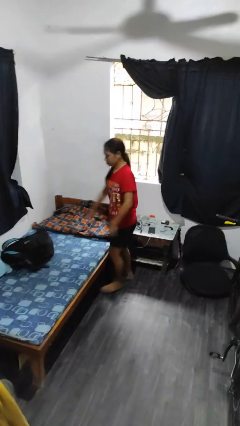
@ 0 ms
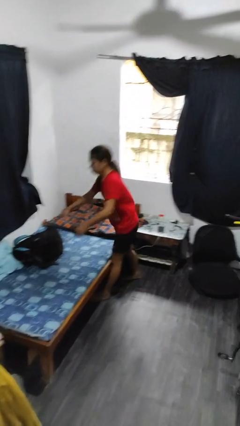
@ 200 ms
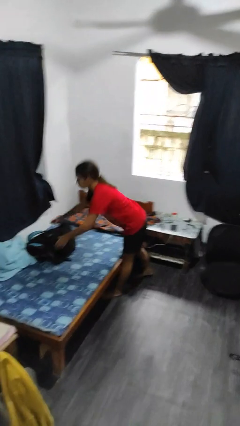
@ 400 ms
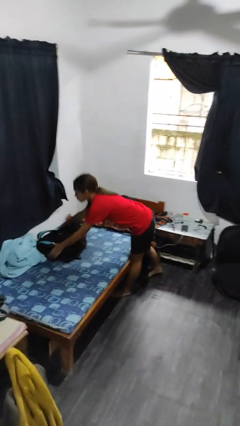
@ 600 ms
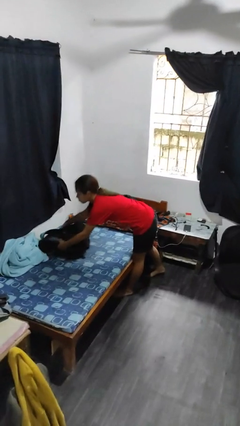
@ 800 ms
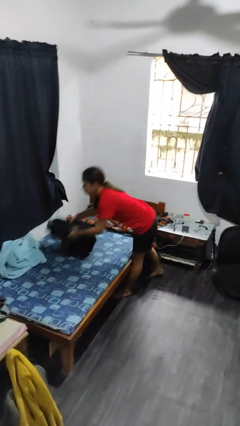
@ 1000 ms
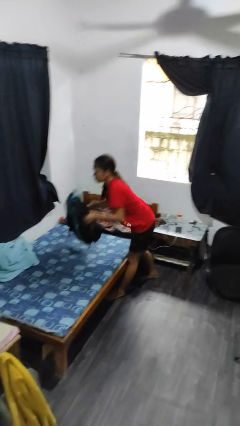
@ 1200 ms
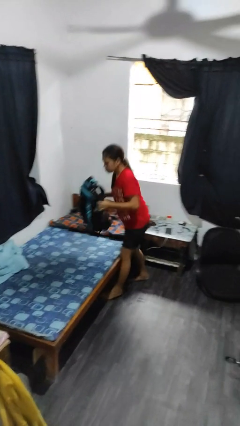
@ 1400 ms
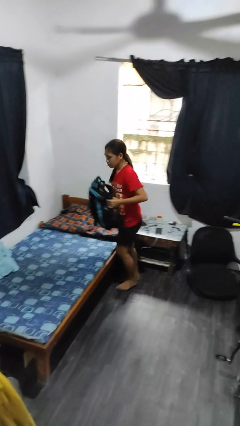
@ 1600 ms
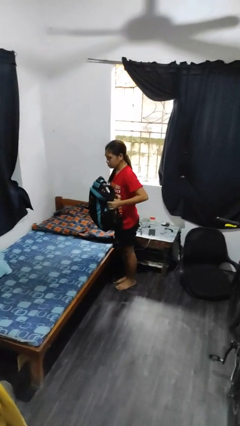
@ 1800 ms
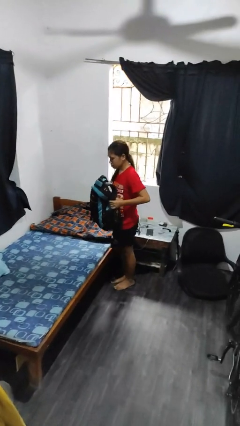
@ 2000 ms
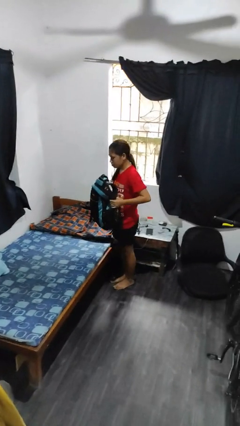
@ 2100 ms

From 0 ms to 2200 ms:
person picks up object from bed

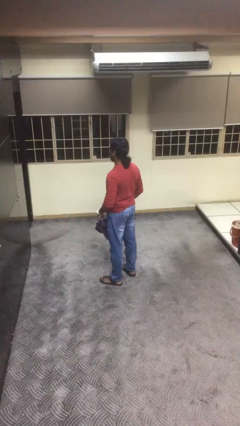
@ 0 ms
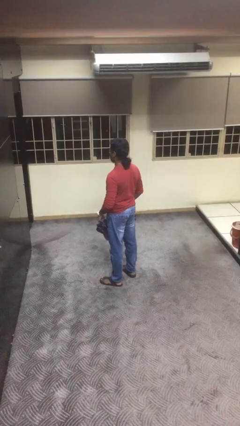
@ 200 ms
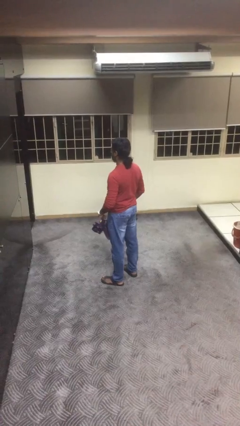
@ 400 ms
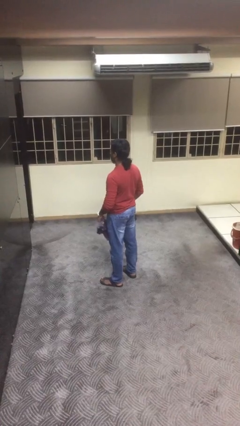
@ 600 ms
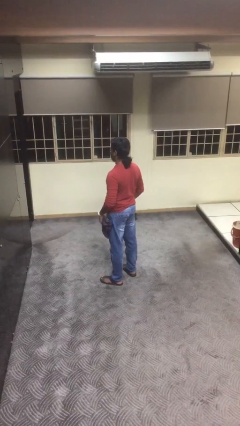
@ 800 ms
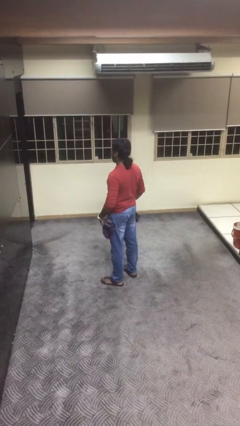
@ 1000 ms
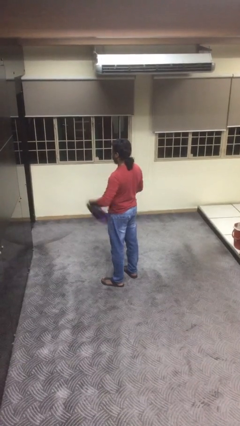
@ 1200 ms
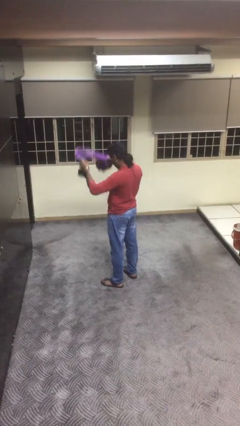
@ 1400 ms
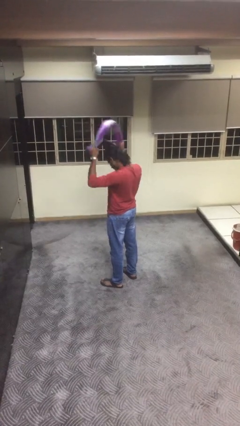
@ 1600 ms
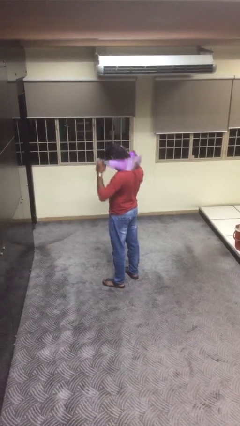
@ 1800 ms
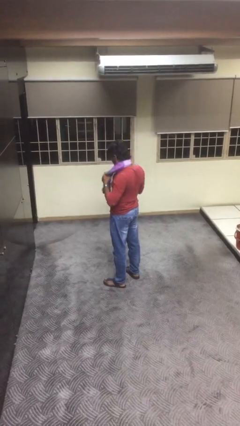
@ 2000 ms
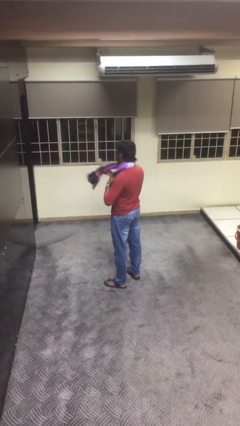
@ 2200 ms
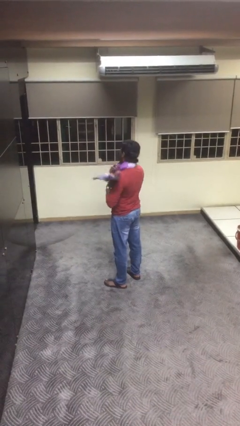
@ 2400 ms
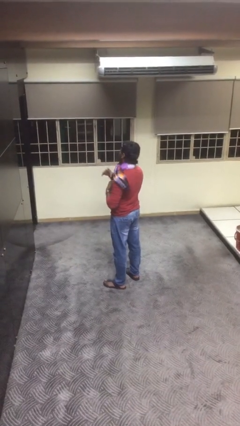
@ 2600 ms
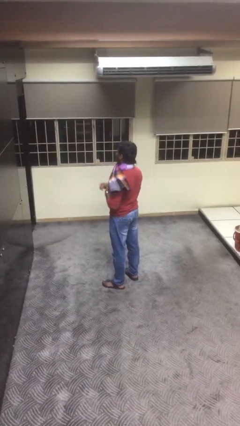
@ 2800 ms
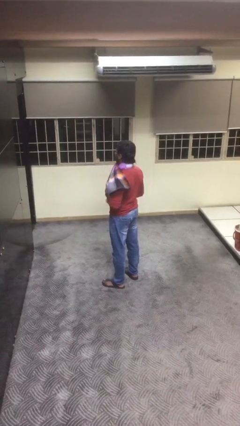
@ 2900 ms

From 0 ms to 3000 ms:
person puts on scarf

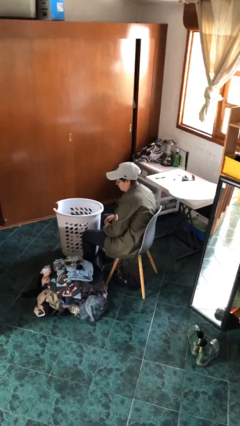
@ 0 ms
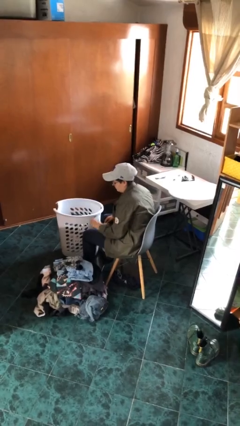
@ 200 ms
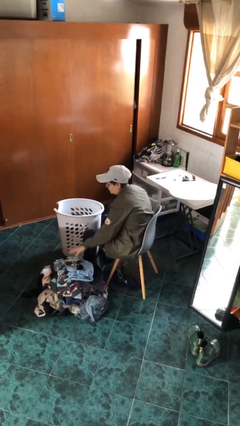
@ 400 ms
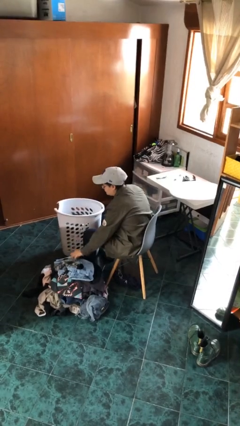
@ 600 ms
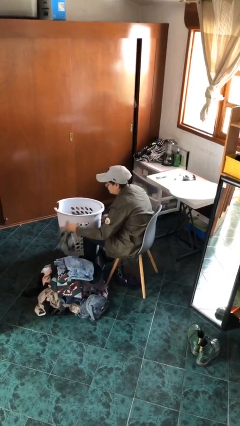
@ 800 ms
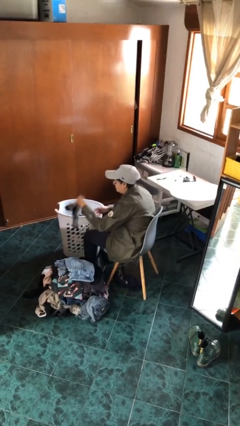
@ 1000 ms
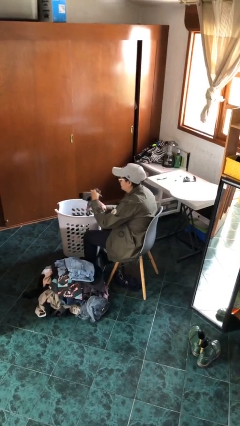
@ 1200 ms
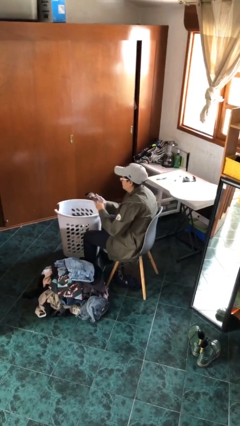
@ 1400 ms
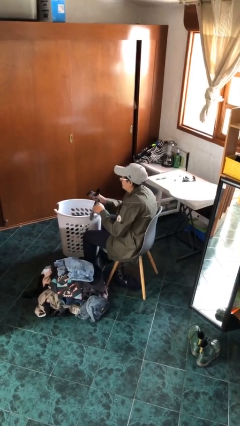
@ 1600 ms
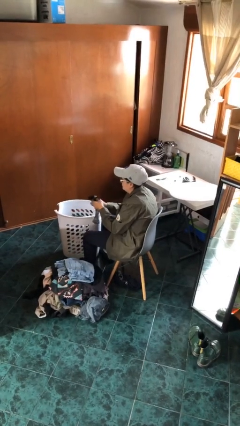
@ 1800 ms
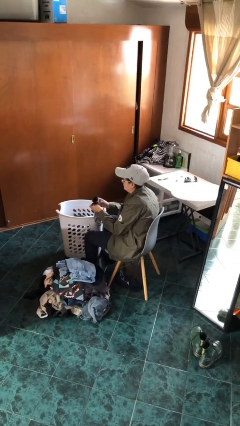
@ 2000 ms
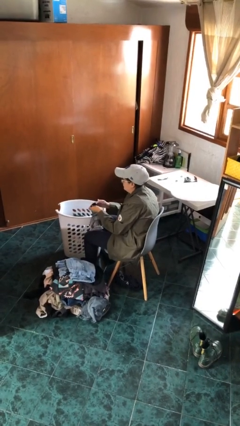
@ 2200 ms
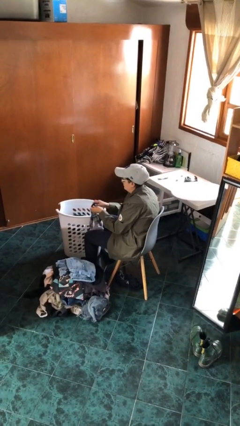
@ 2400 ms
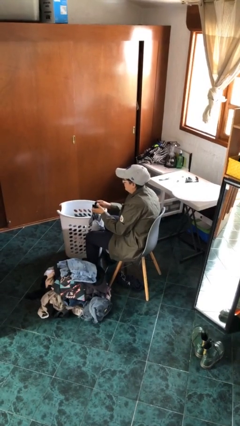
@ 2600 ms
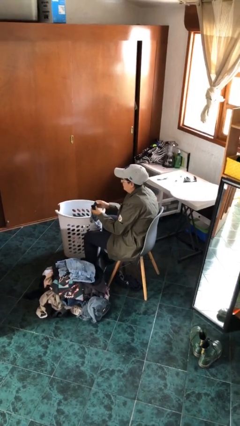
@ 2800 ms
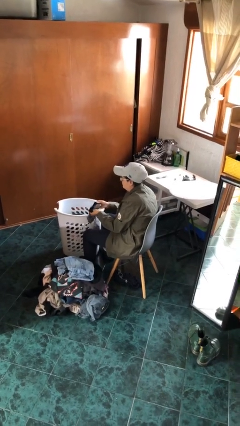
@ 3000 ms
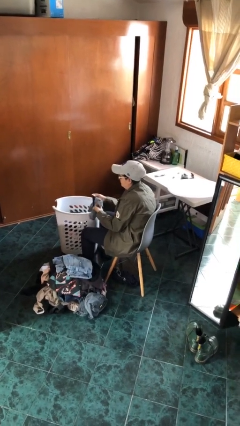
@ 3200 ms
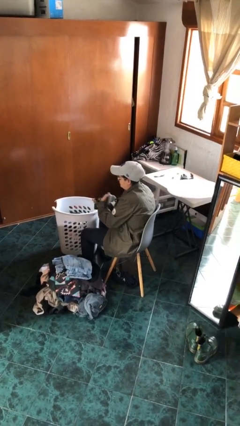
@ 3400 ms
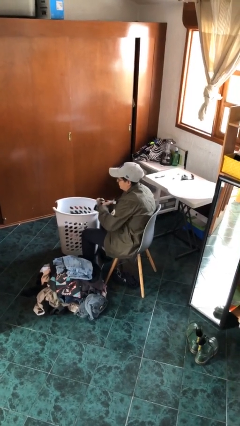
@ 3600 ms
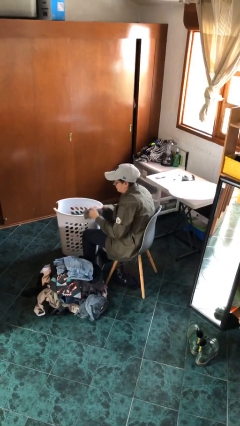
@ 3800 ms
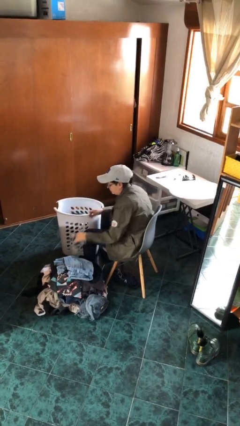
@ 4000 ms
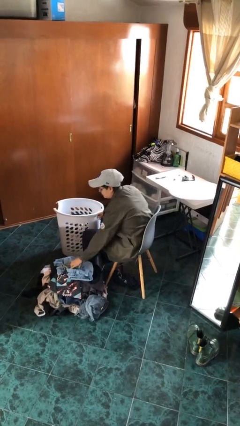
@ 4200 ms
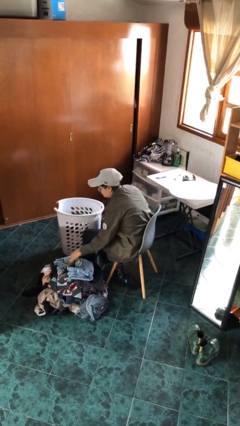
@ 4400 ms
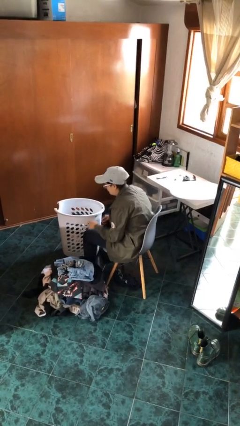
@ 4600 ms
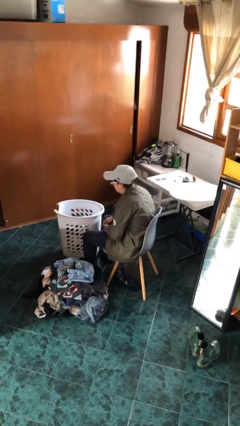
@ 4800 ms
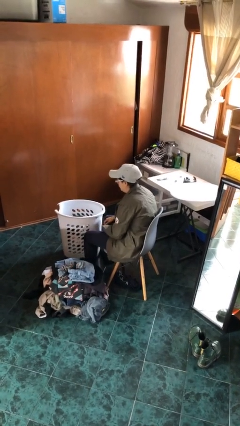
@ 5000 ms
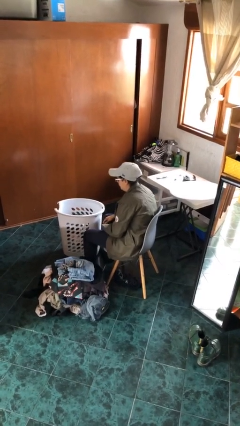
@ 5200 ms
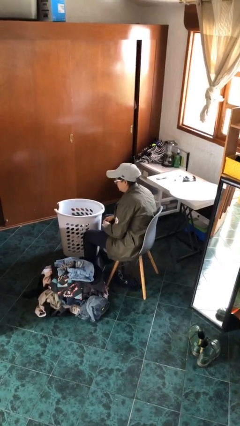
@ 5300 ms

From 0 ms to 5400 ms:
person folds socks

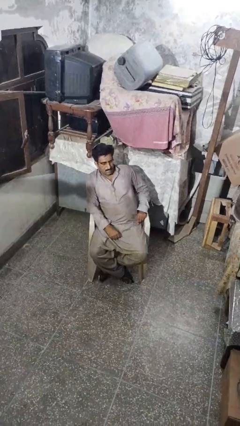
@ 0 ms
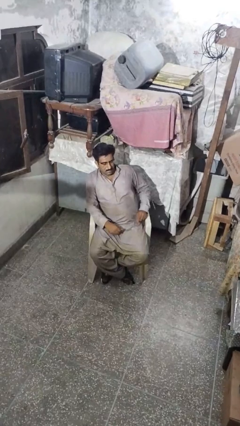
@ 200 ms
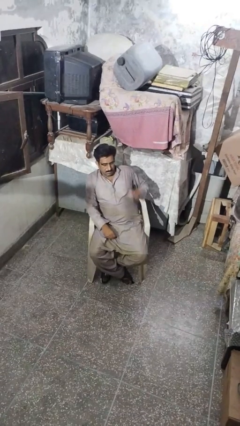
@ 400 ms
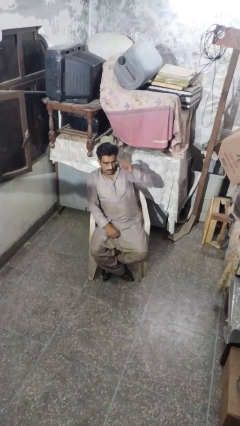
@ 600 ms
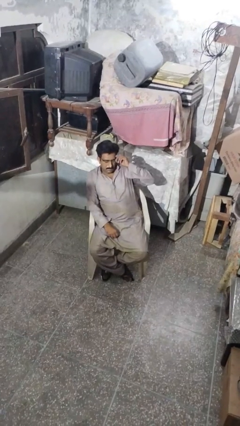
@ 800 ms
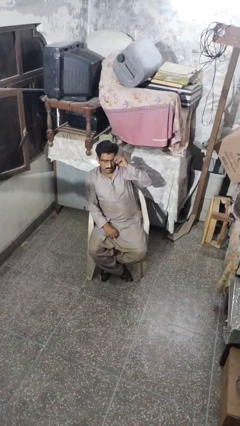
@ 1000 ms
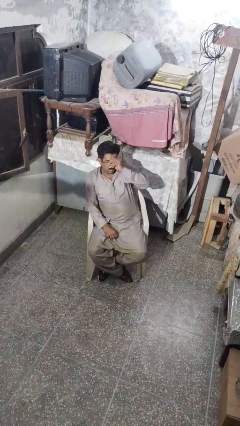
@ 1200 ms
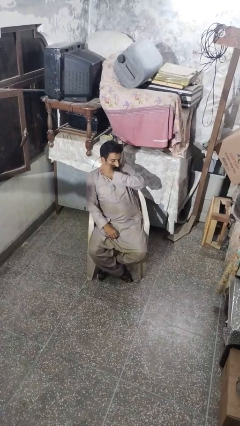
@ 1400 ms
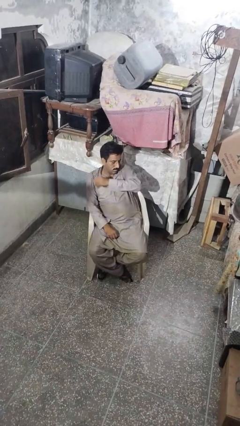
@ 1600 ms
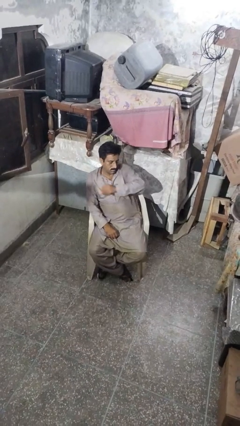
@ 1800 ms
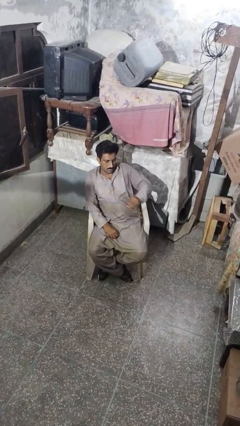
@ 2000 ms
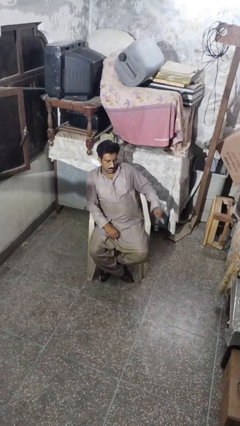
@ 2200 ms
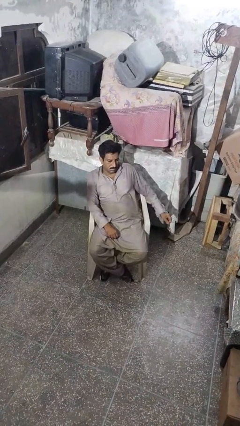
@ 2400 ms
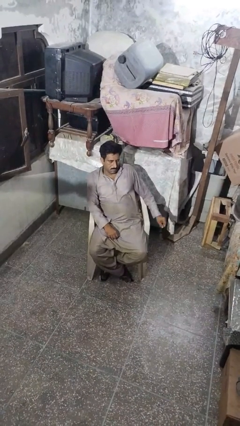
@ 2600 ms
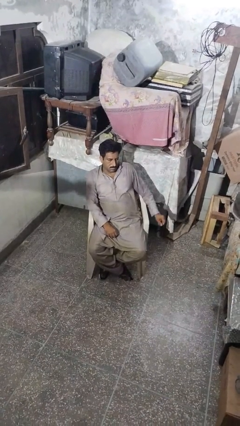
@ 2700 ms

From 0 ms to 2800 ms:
person takes off glasses

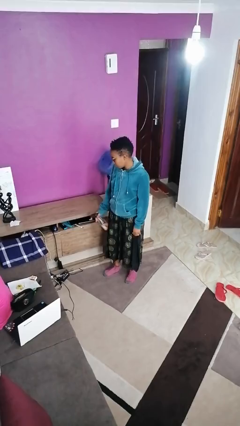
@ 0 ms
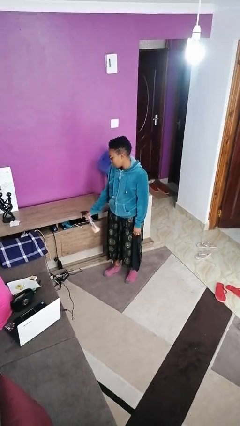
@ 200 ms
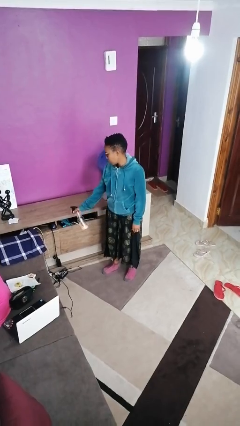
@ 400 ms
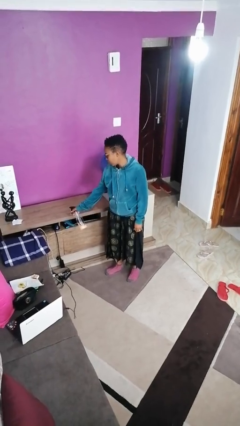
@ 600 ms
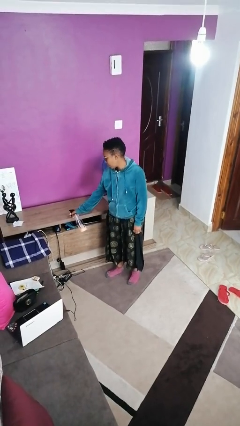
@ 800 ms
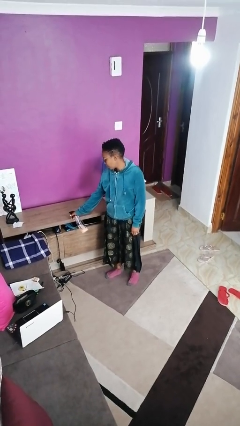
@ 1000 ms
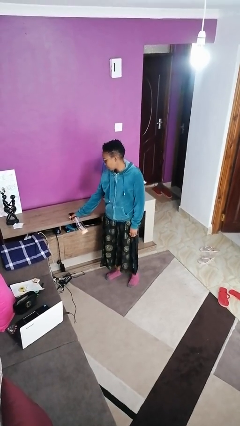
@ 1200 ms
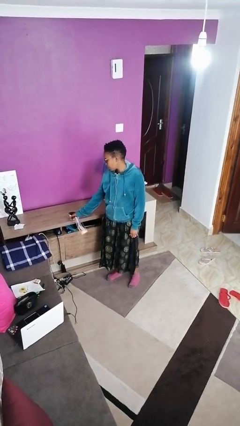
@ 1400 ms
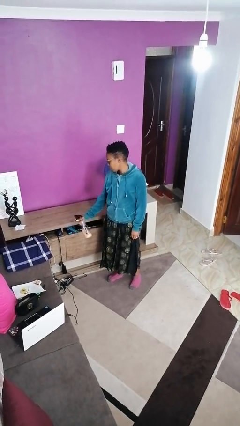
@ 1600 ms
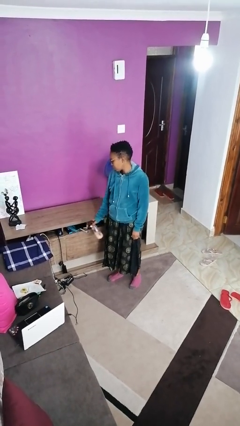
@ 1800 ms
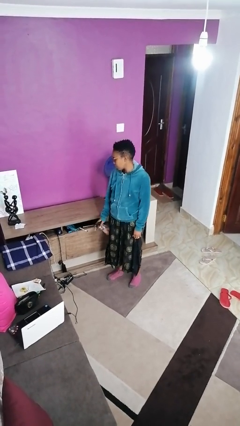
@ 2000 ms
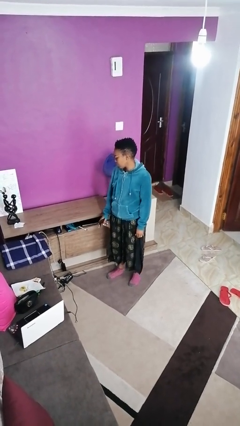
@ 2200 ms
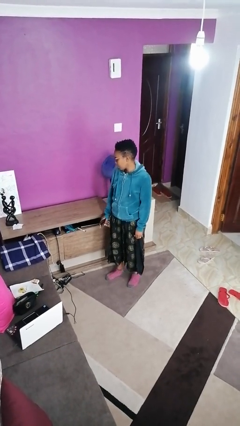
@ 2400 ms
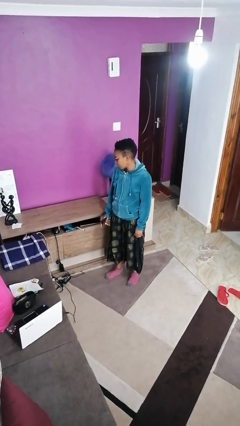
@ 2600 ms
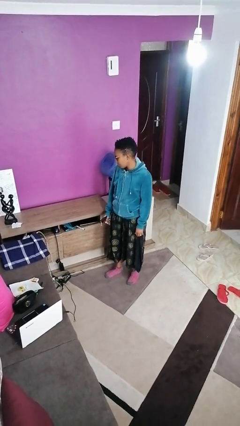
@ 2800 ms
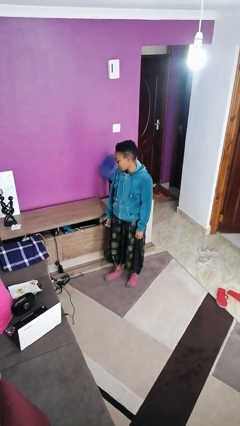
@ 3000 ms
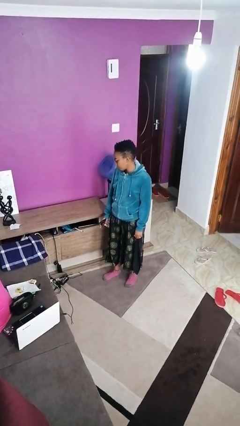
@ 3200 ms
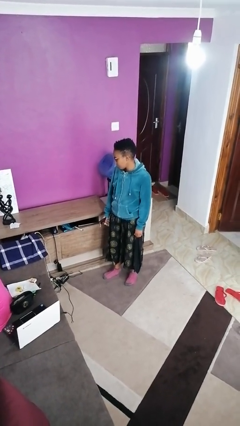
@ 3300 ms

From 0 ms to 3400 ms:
person sprays from bottle

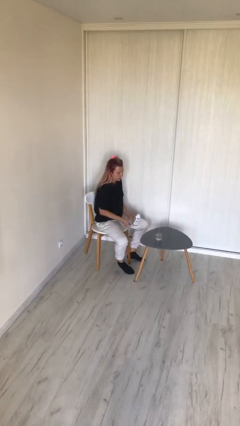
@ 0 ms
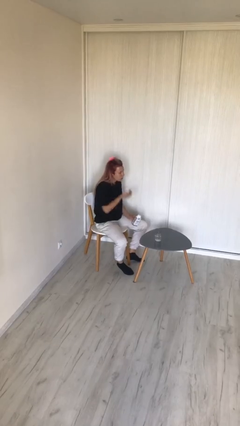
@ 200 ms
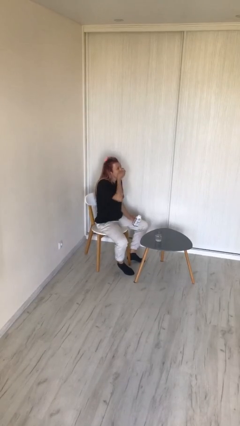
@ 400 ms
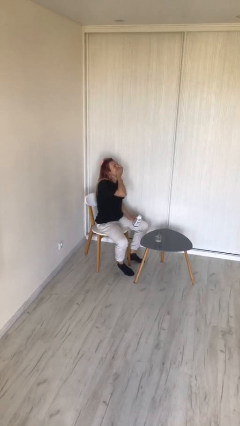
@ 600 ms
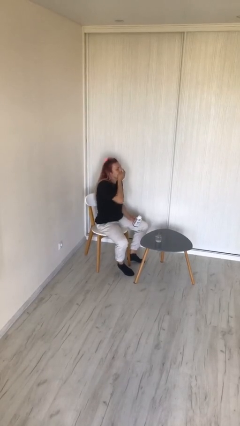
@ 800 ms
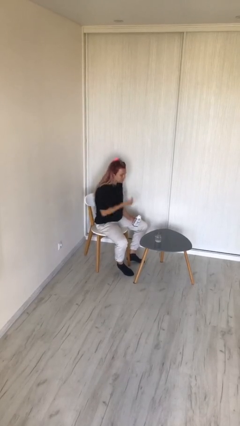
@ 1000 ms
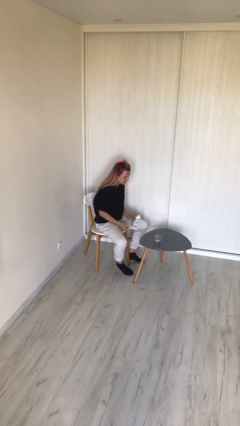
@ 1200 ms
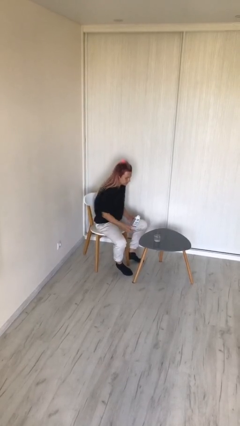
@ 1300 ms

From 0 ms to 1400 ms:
person takes medicine pills
